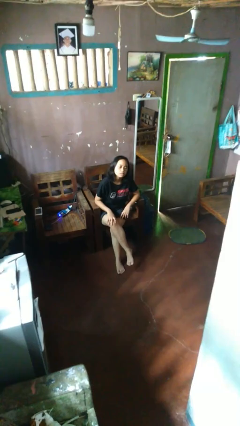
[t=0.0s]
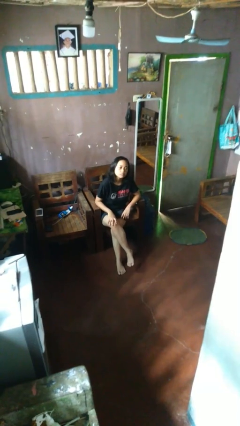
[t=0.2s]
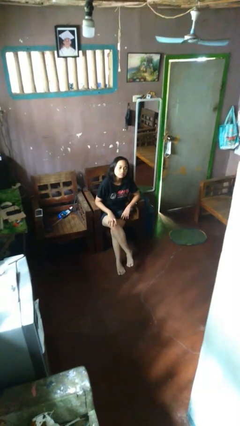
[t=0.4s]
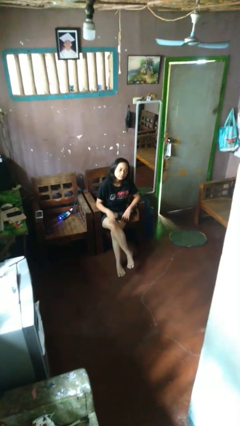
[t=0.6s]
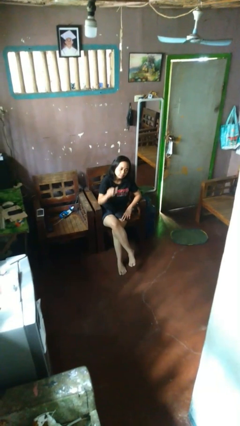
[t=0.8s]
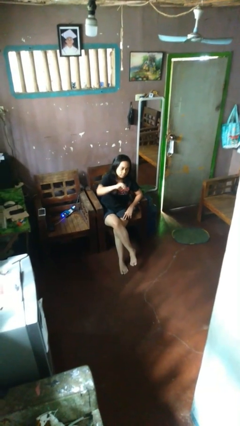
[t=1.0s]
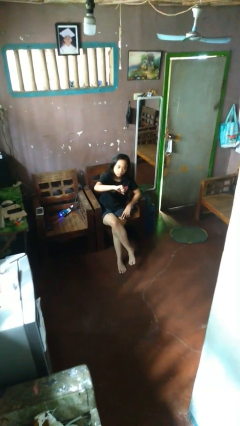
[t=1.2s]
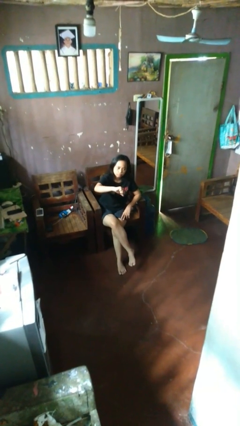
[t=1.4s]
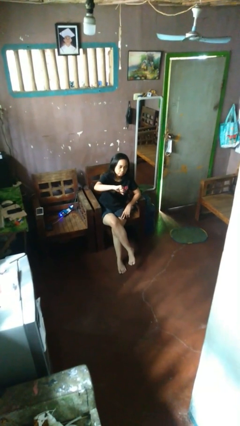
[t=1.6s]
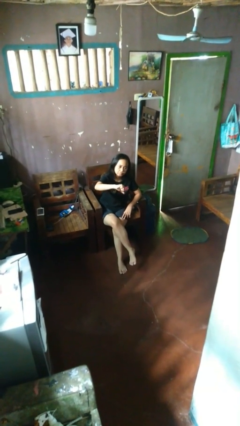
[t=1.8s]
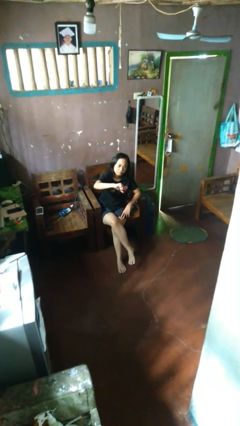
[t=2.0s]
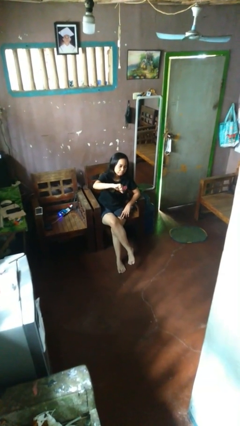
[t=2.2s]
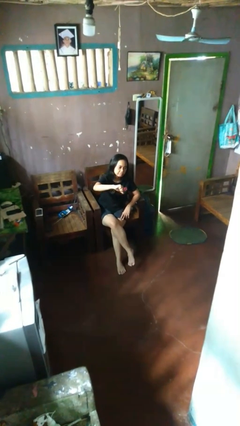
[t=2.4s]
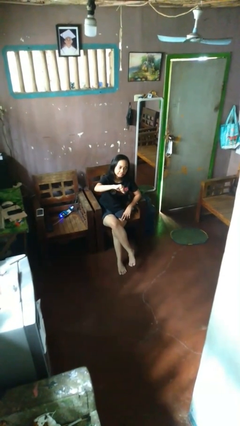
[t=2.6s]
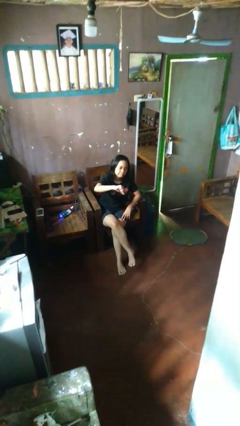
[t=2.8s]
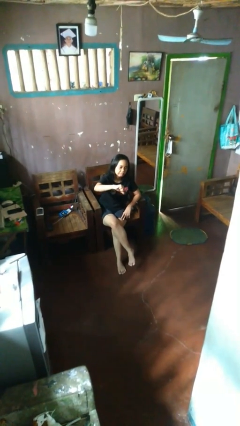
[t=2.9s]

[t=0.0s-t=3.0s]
person gestures thumbs down

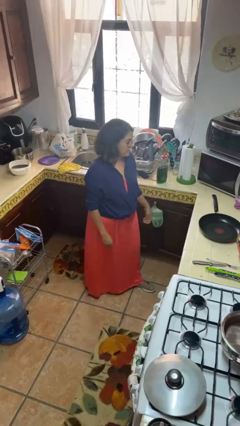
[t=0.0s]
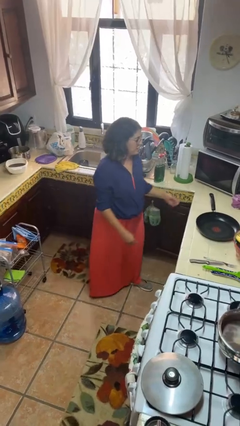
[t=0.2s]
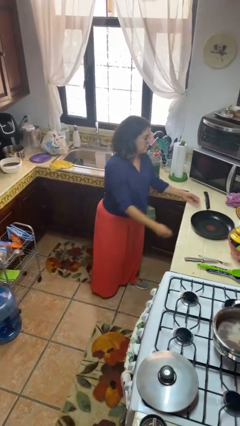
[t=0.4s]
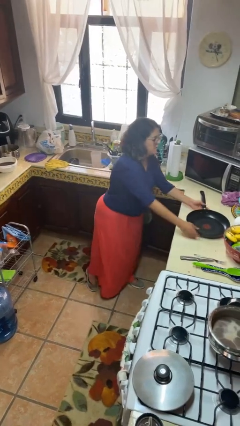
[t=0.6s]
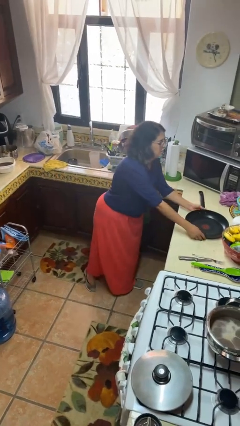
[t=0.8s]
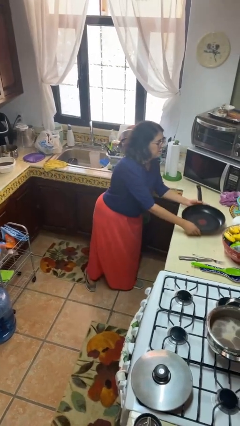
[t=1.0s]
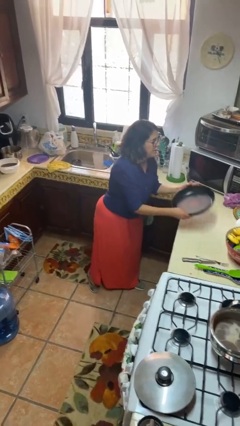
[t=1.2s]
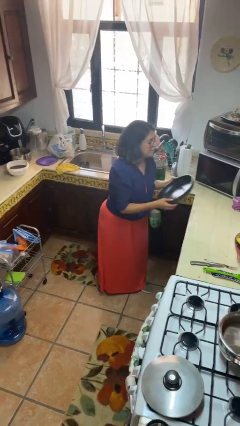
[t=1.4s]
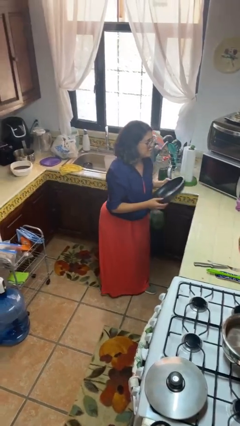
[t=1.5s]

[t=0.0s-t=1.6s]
person picks up object from countertop

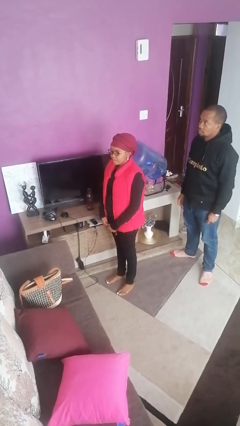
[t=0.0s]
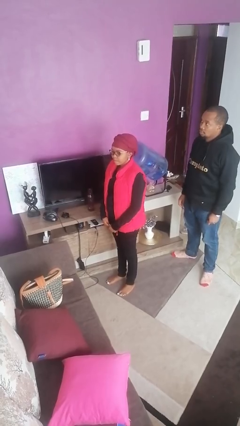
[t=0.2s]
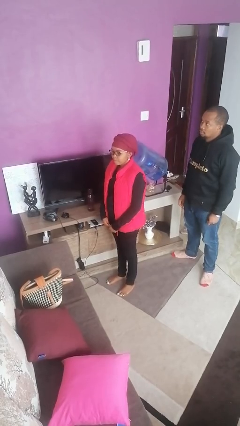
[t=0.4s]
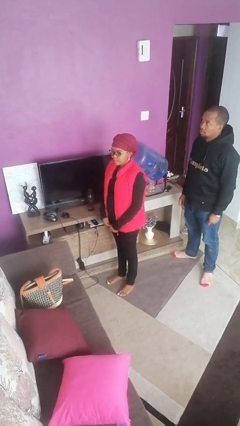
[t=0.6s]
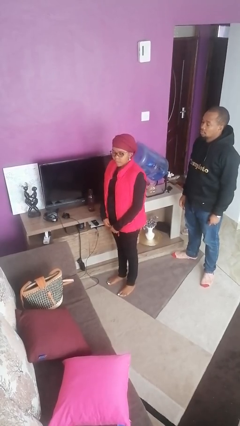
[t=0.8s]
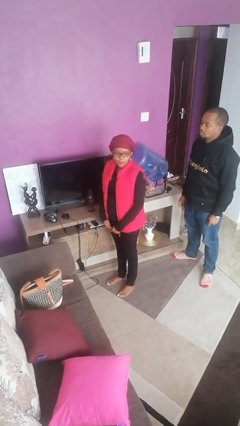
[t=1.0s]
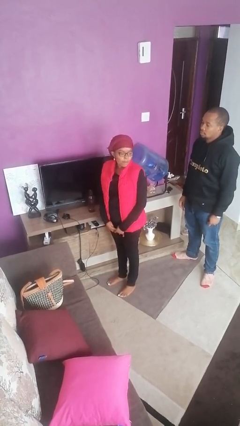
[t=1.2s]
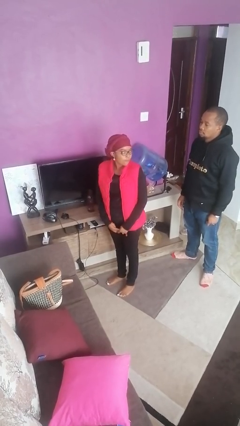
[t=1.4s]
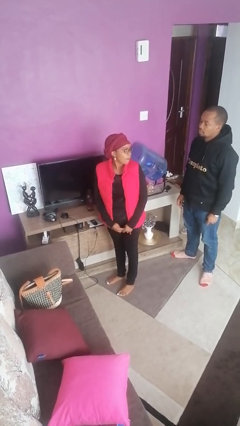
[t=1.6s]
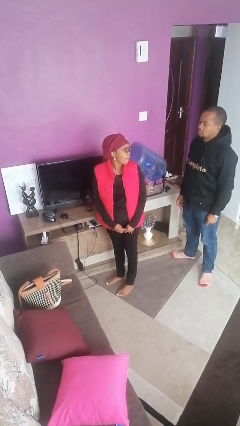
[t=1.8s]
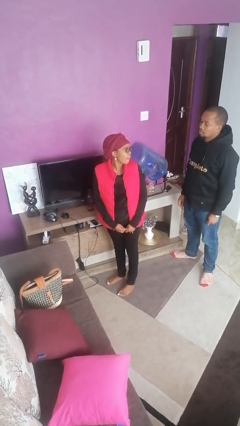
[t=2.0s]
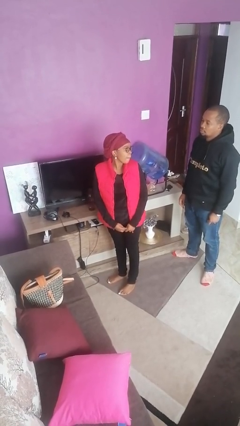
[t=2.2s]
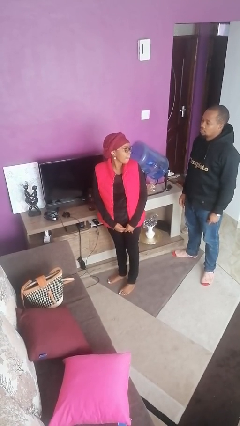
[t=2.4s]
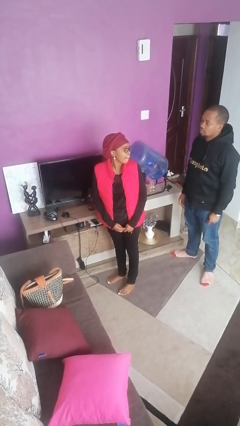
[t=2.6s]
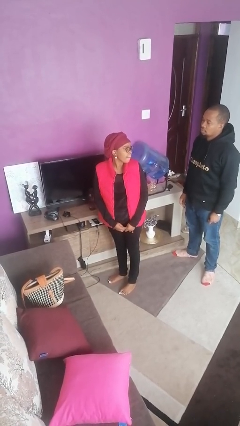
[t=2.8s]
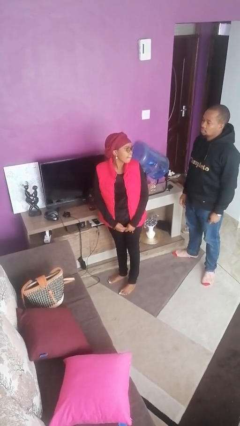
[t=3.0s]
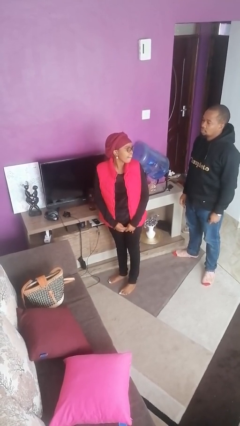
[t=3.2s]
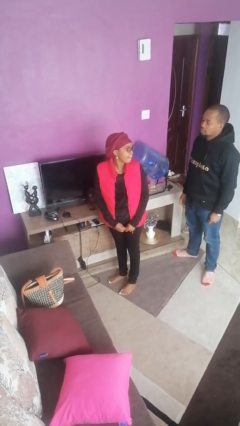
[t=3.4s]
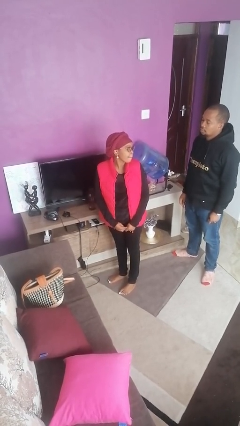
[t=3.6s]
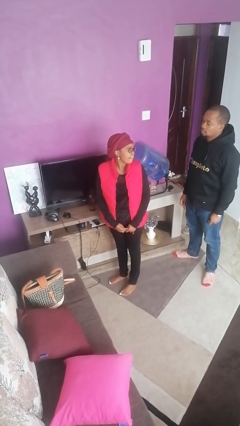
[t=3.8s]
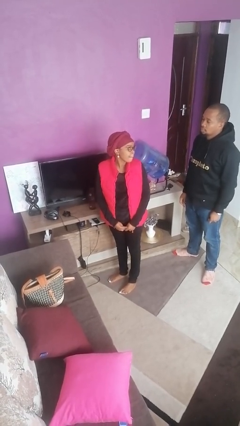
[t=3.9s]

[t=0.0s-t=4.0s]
person looks over shoulder

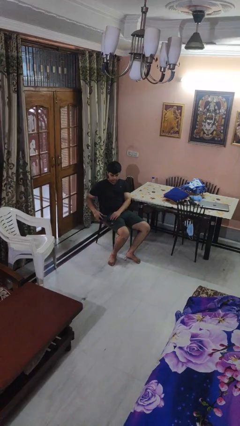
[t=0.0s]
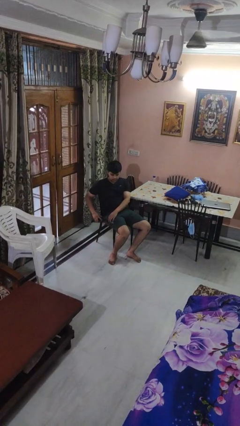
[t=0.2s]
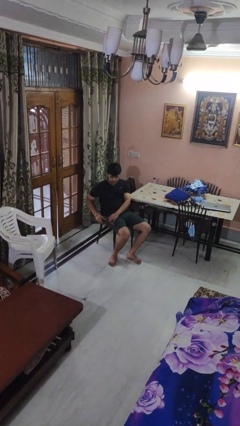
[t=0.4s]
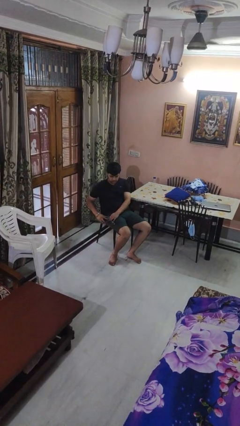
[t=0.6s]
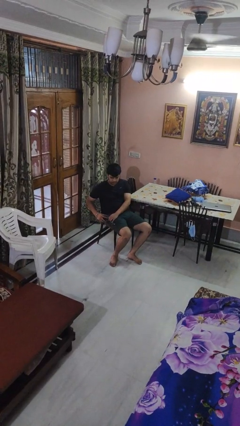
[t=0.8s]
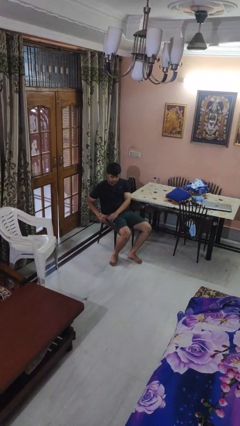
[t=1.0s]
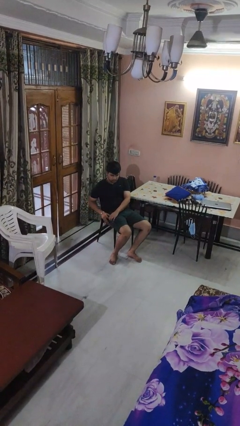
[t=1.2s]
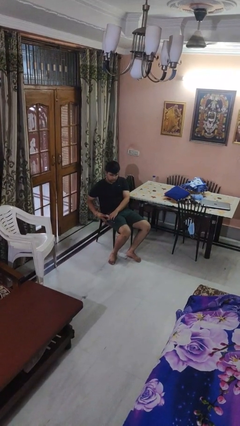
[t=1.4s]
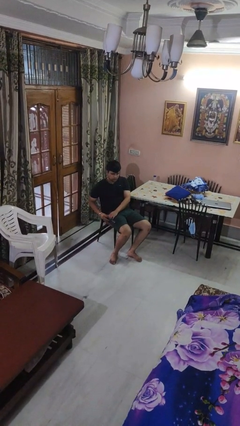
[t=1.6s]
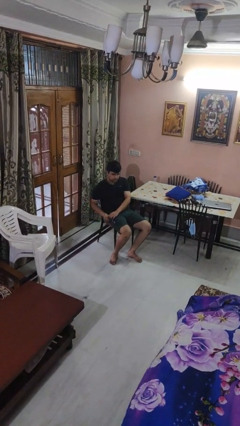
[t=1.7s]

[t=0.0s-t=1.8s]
person puts phone into pocket

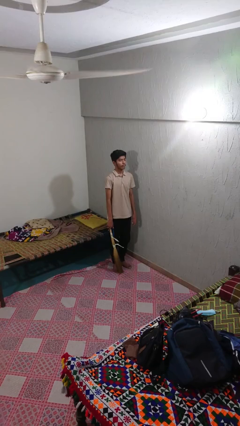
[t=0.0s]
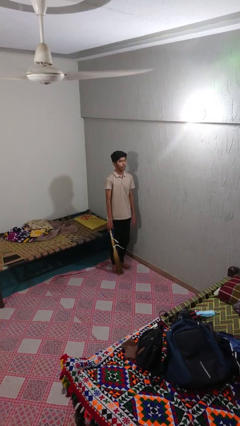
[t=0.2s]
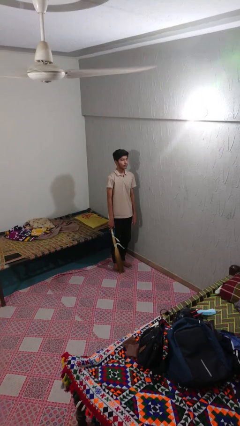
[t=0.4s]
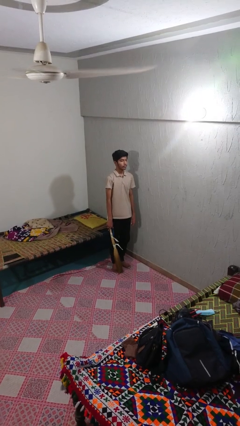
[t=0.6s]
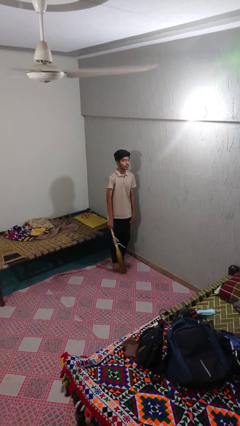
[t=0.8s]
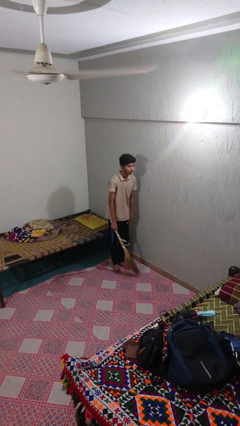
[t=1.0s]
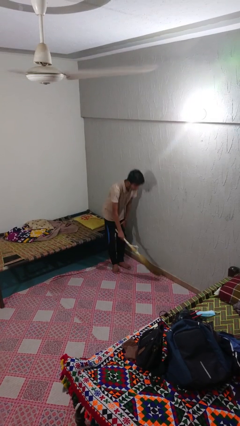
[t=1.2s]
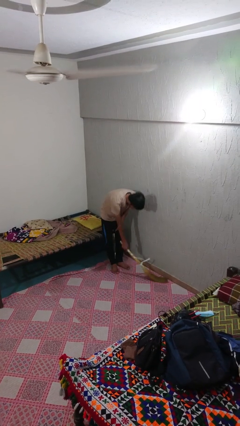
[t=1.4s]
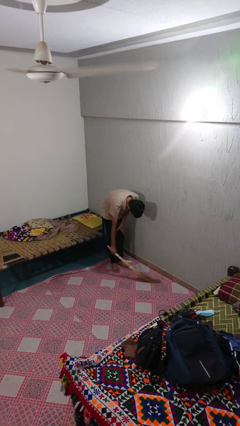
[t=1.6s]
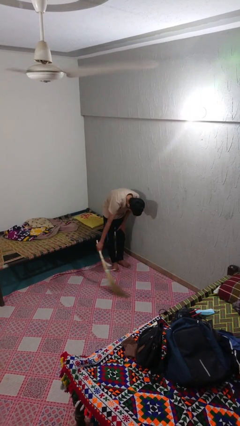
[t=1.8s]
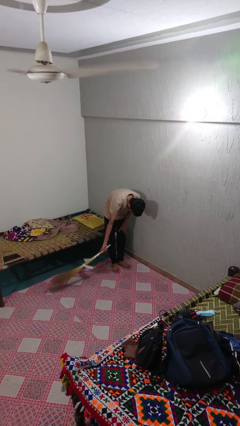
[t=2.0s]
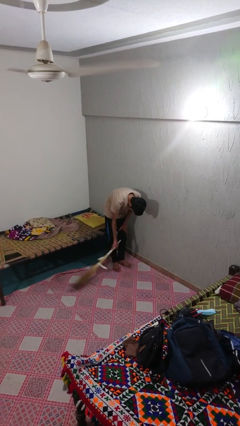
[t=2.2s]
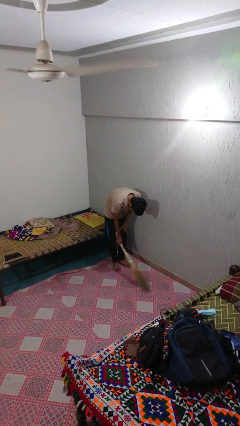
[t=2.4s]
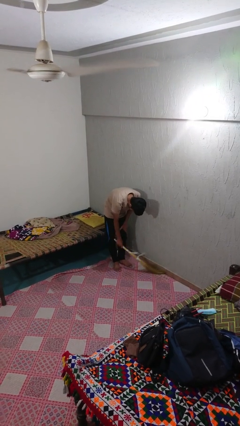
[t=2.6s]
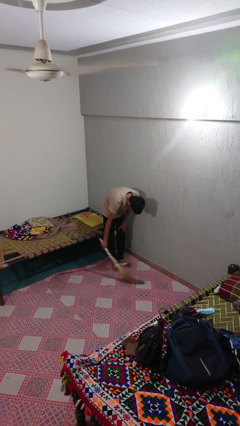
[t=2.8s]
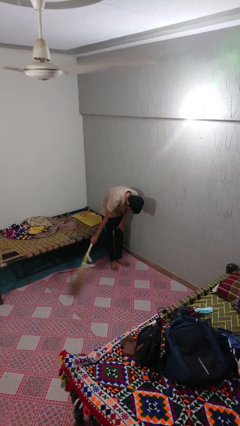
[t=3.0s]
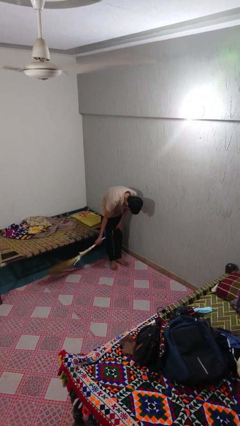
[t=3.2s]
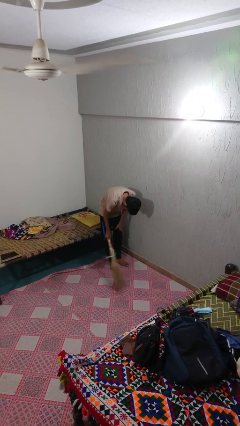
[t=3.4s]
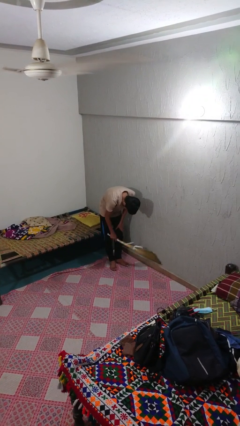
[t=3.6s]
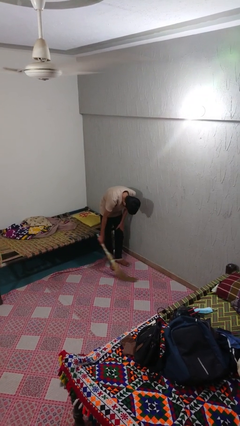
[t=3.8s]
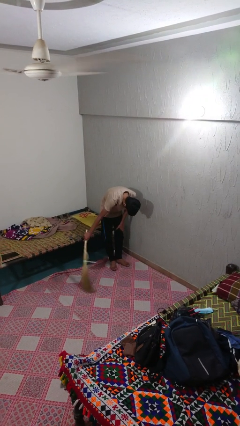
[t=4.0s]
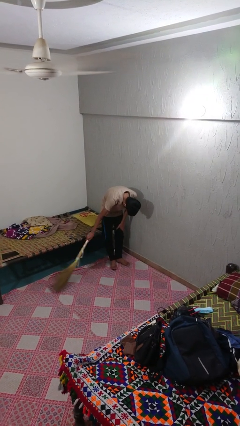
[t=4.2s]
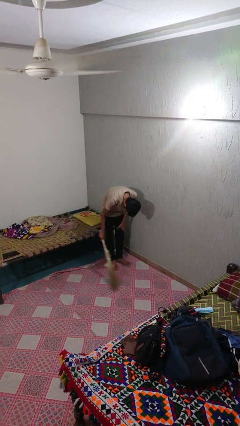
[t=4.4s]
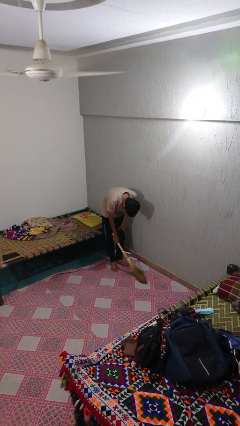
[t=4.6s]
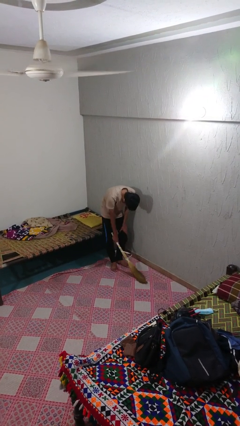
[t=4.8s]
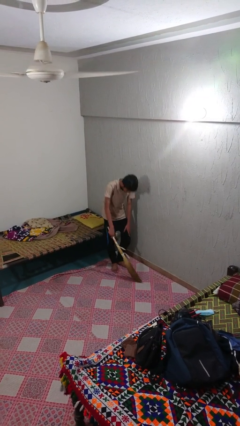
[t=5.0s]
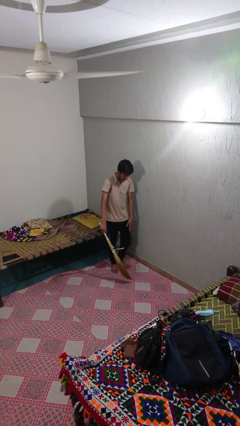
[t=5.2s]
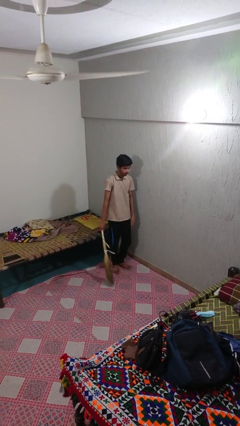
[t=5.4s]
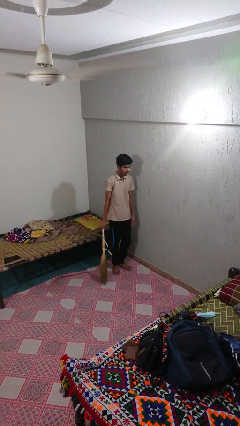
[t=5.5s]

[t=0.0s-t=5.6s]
person sweeps floor

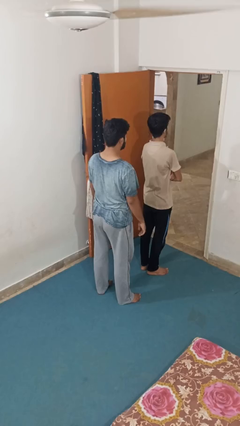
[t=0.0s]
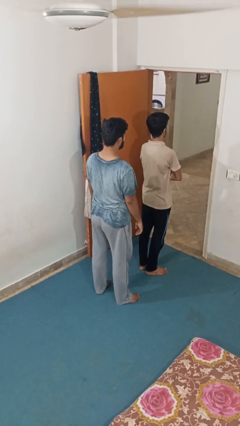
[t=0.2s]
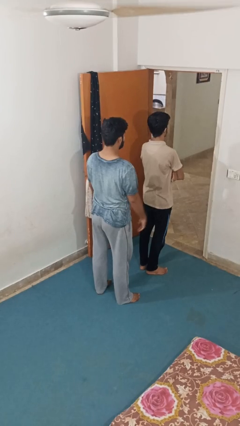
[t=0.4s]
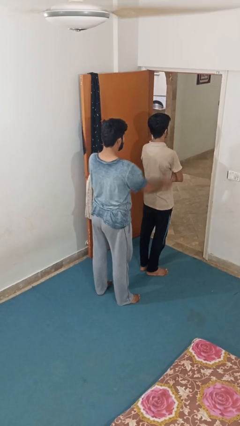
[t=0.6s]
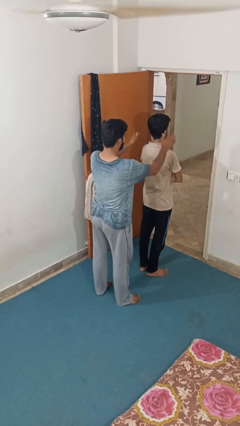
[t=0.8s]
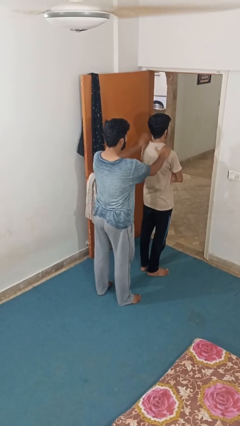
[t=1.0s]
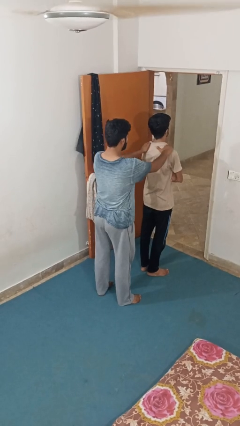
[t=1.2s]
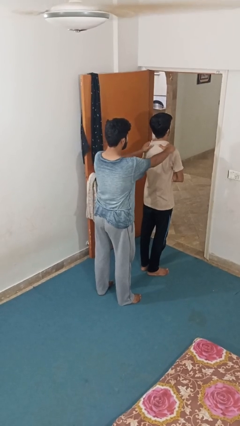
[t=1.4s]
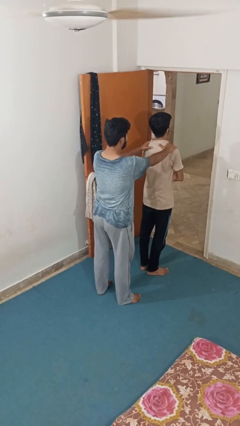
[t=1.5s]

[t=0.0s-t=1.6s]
person grabs person by shoulder
